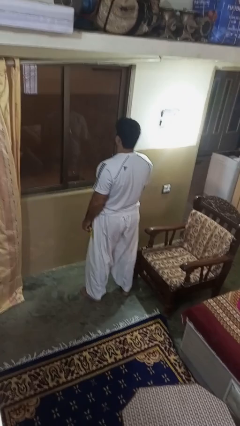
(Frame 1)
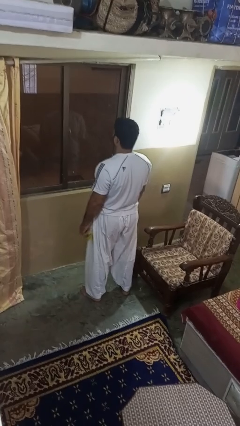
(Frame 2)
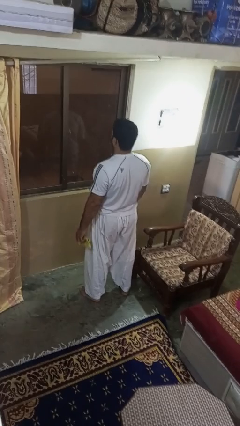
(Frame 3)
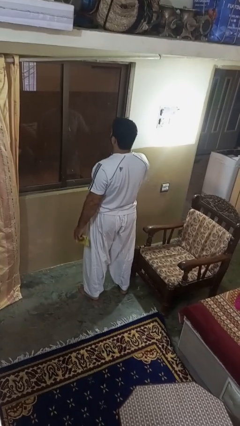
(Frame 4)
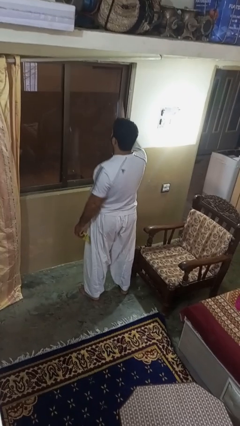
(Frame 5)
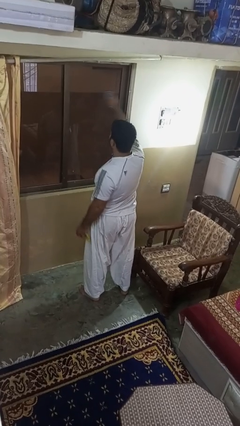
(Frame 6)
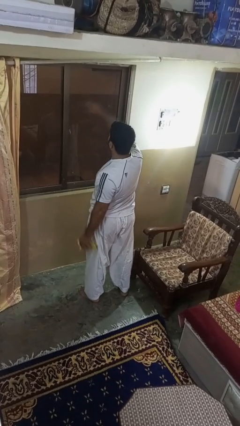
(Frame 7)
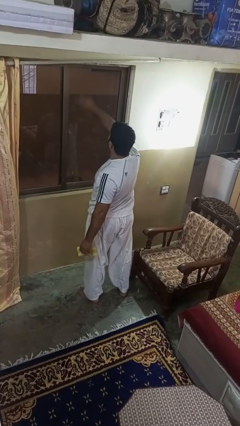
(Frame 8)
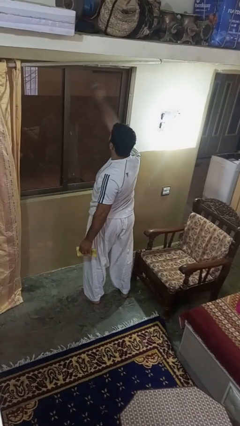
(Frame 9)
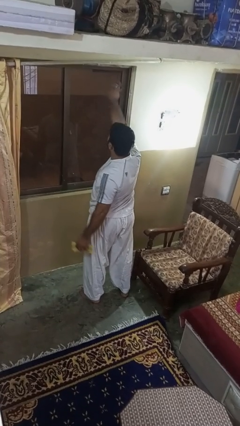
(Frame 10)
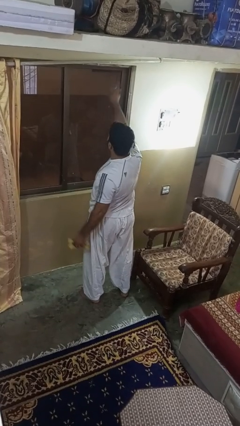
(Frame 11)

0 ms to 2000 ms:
person sprays from bottle

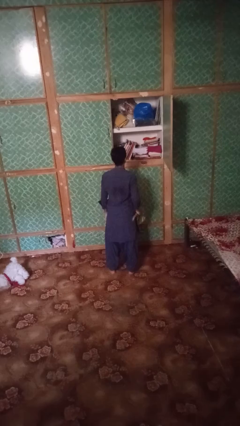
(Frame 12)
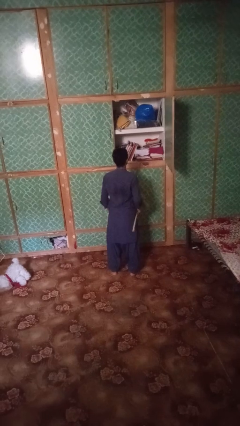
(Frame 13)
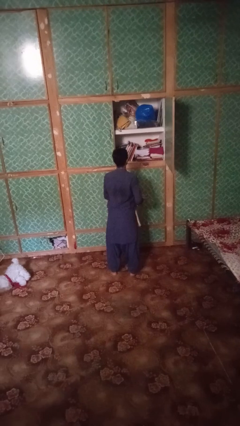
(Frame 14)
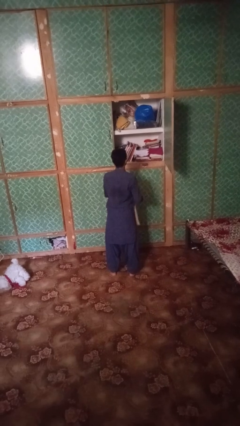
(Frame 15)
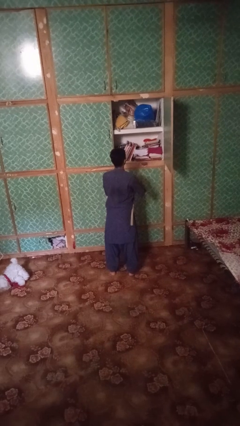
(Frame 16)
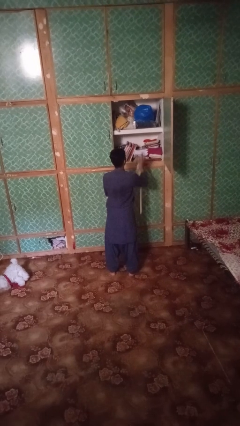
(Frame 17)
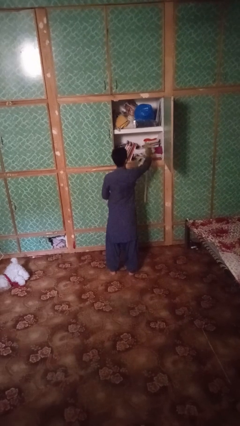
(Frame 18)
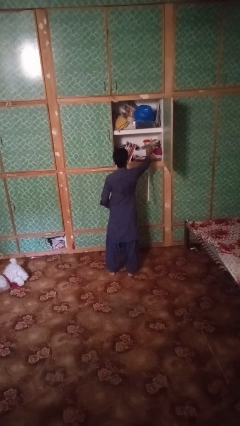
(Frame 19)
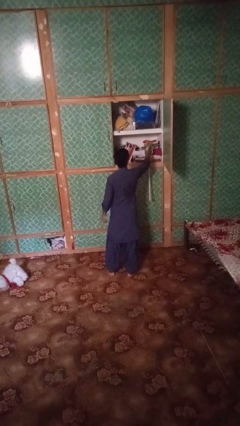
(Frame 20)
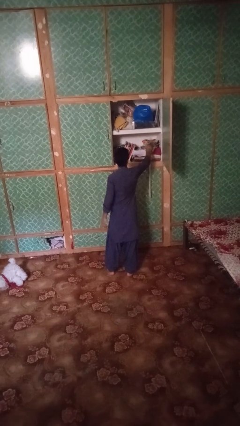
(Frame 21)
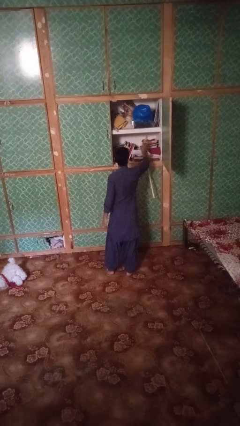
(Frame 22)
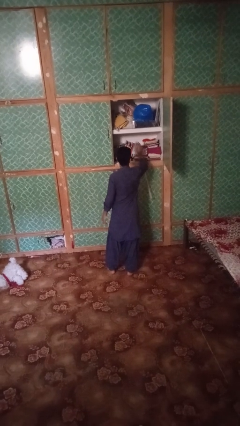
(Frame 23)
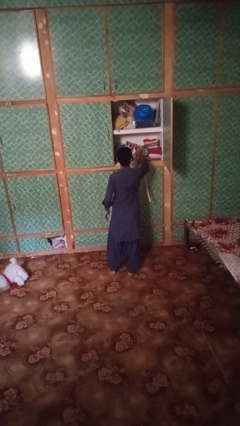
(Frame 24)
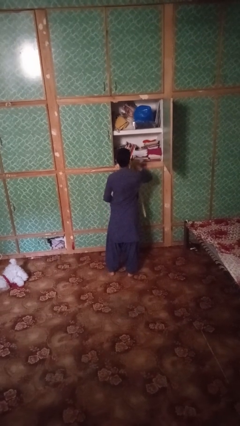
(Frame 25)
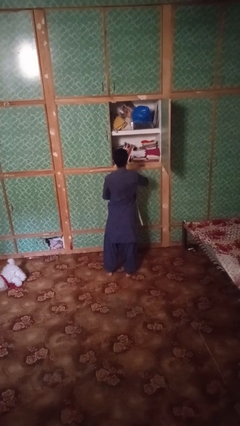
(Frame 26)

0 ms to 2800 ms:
person dusts furniture

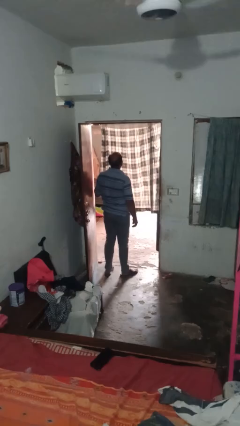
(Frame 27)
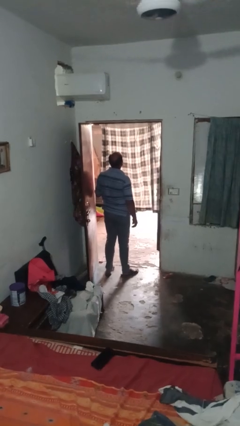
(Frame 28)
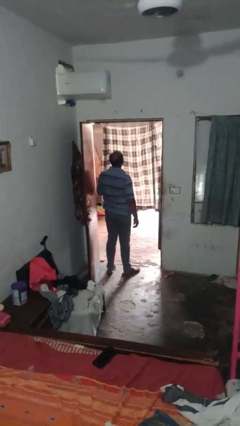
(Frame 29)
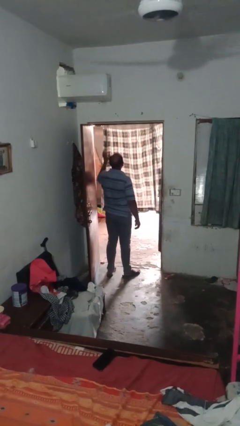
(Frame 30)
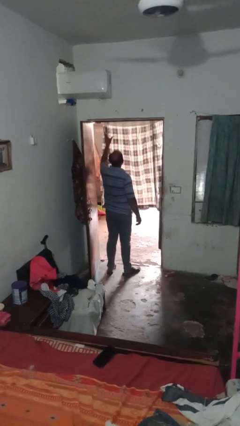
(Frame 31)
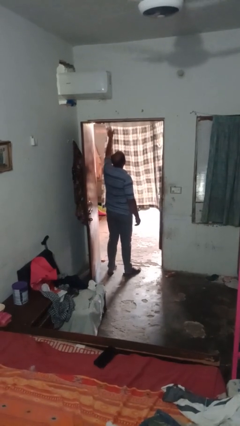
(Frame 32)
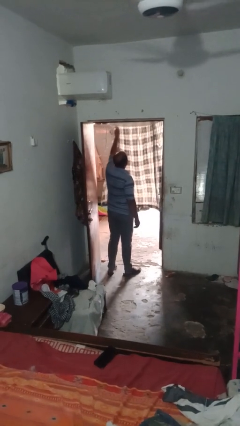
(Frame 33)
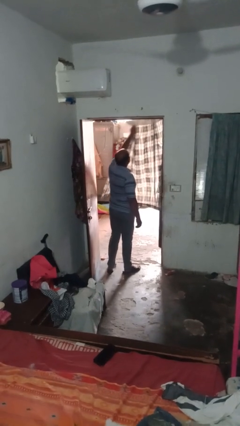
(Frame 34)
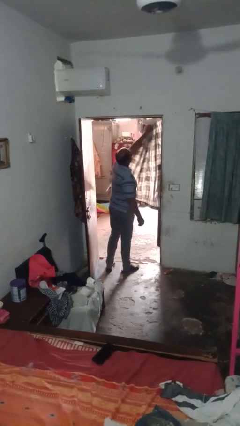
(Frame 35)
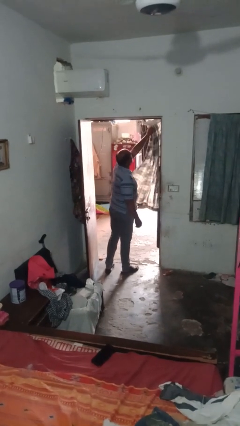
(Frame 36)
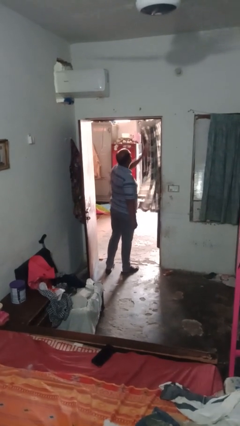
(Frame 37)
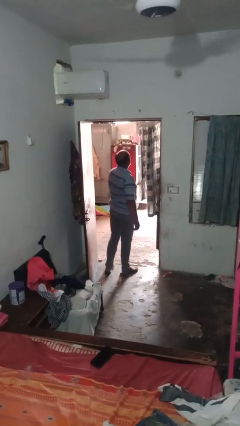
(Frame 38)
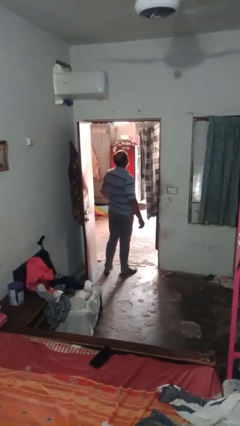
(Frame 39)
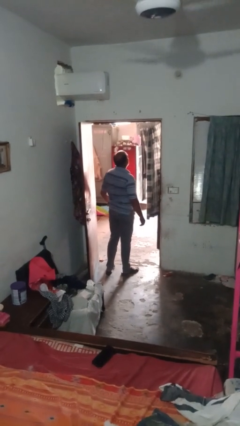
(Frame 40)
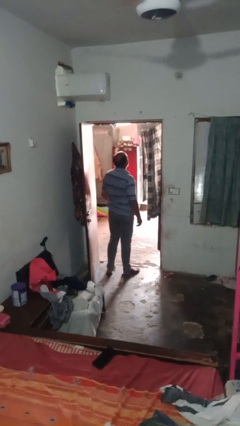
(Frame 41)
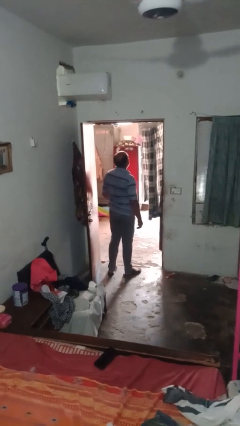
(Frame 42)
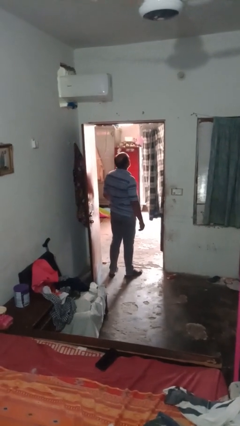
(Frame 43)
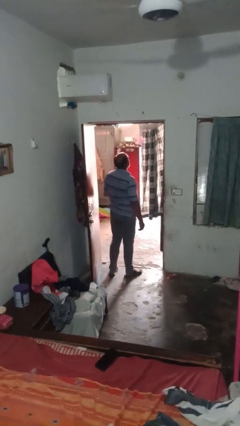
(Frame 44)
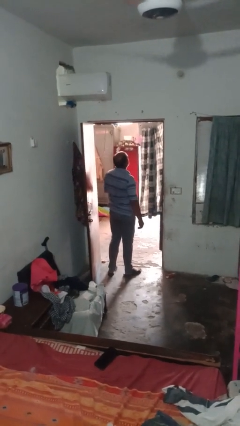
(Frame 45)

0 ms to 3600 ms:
person opens curtains

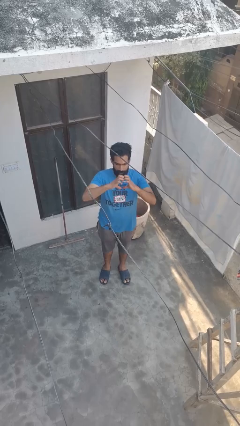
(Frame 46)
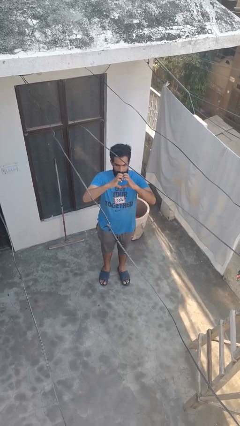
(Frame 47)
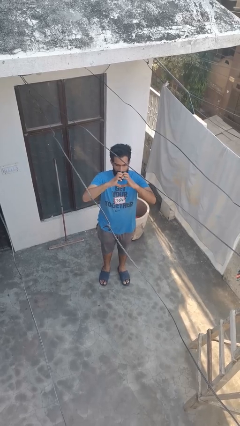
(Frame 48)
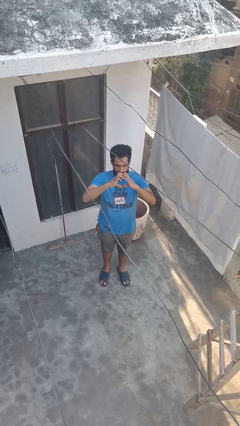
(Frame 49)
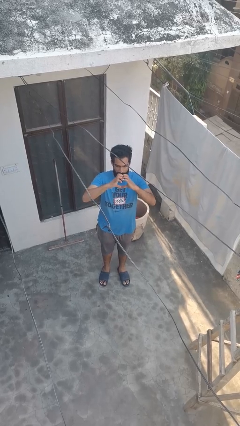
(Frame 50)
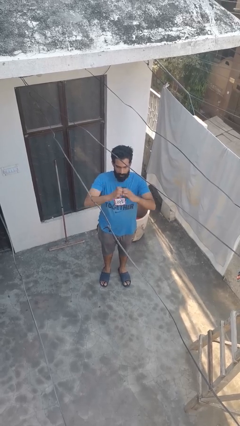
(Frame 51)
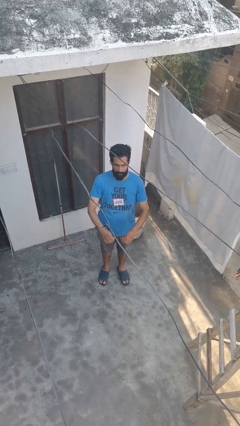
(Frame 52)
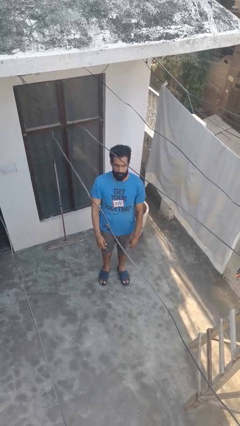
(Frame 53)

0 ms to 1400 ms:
person gestures heart

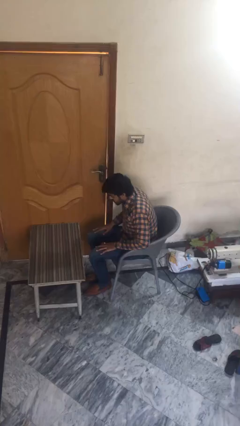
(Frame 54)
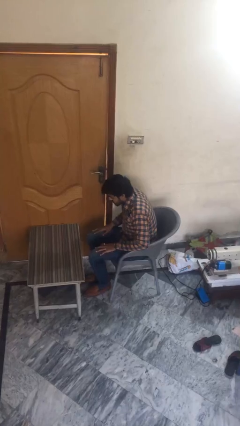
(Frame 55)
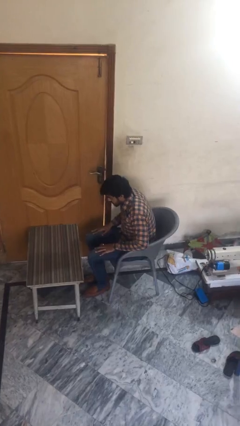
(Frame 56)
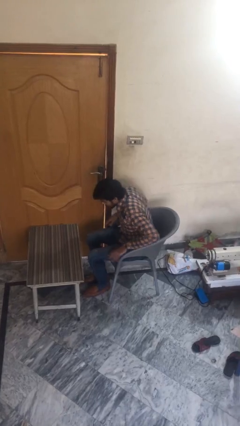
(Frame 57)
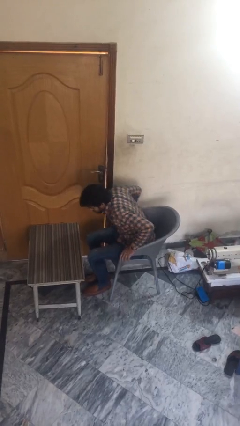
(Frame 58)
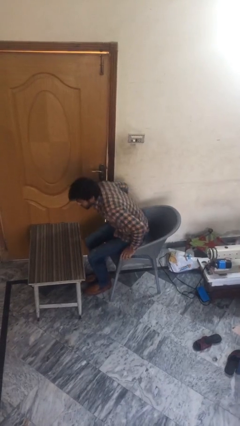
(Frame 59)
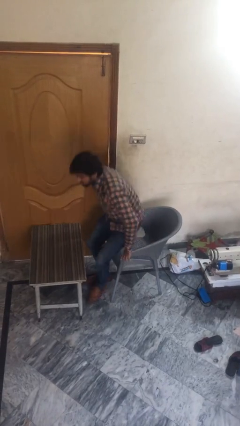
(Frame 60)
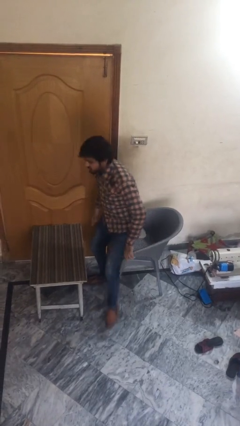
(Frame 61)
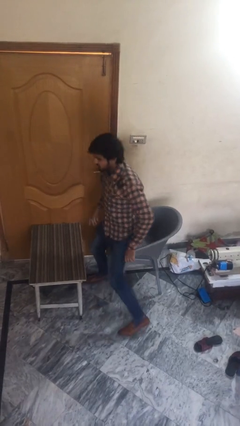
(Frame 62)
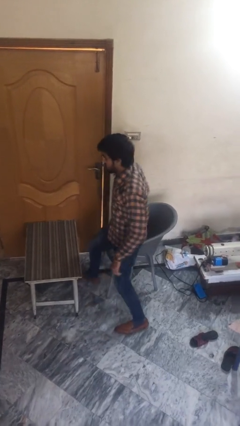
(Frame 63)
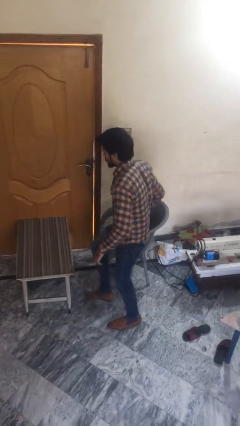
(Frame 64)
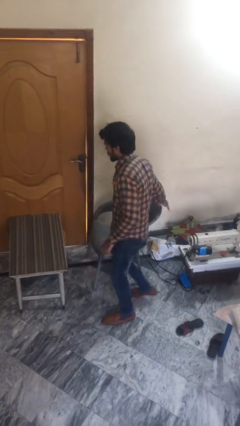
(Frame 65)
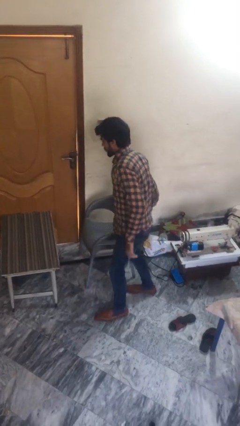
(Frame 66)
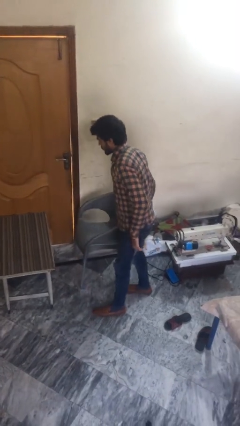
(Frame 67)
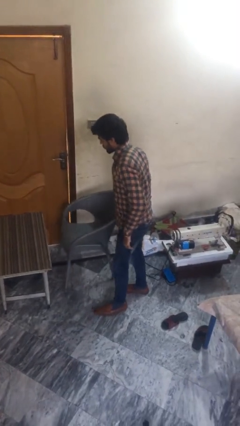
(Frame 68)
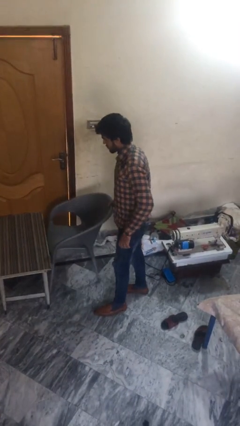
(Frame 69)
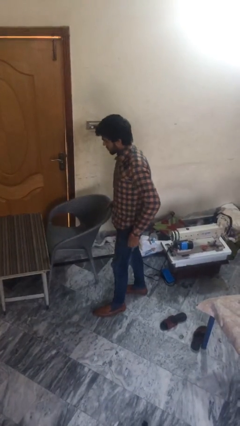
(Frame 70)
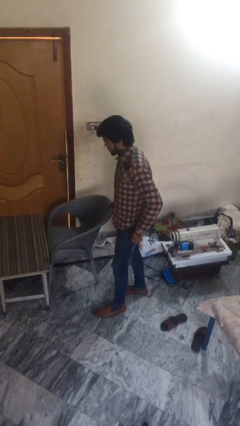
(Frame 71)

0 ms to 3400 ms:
person stands up

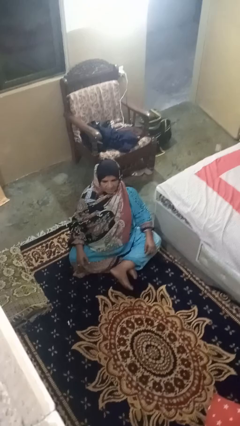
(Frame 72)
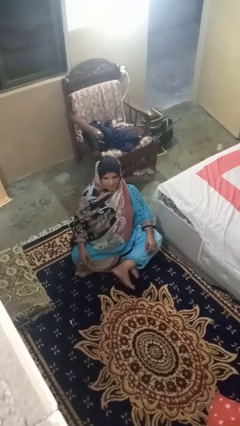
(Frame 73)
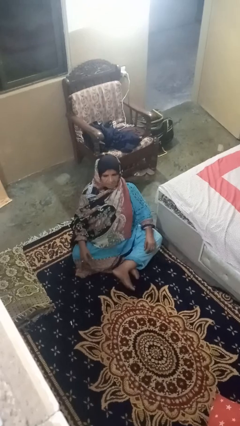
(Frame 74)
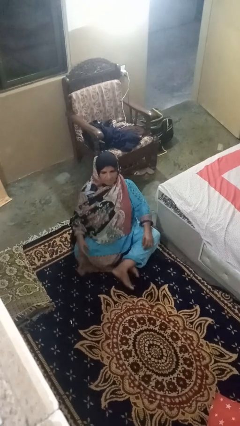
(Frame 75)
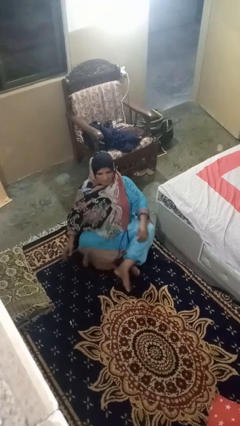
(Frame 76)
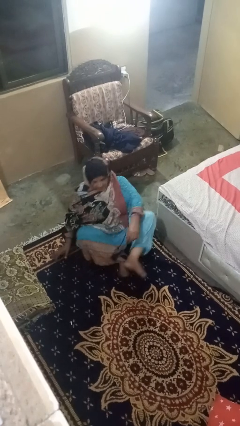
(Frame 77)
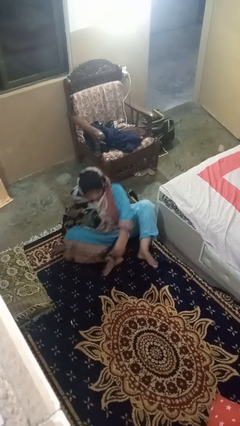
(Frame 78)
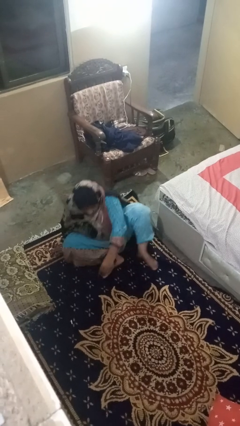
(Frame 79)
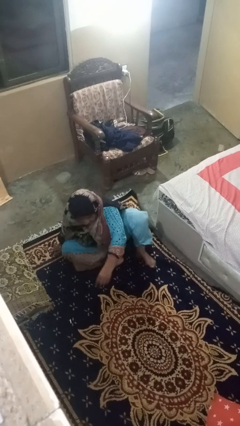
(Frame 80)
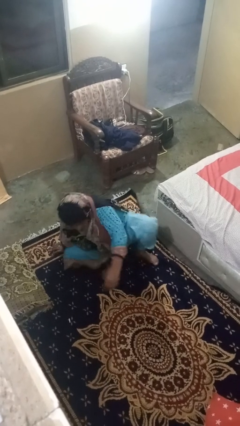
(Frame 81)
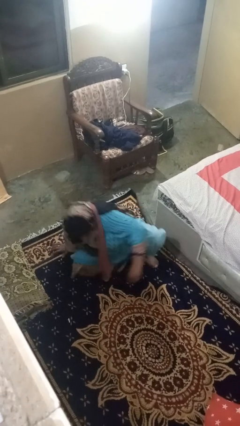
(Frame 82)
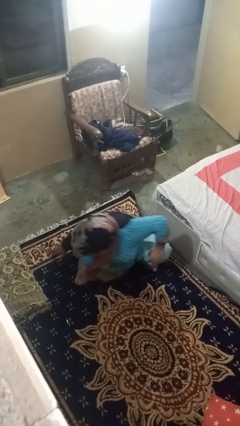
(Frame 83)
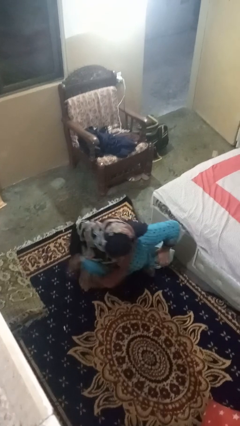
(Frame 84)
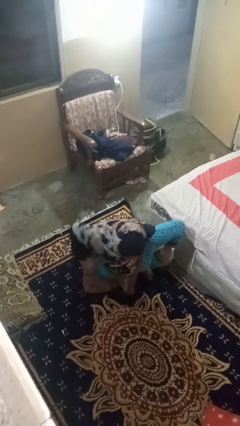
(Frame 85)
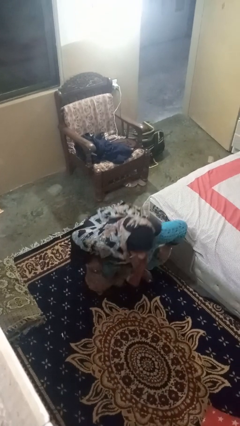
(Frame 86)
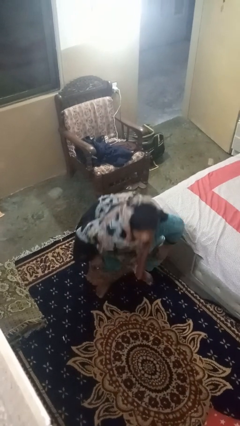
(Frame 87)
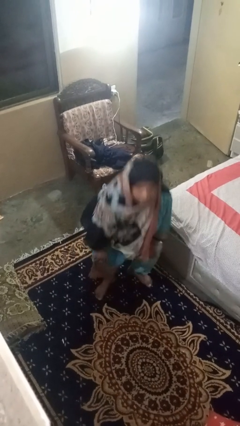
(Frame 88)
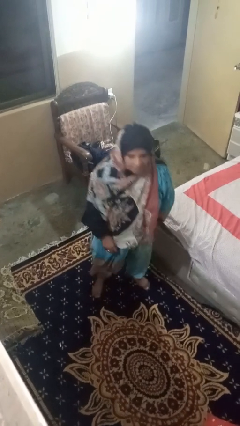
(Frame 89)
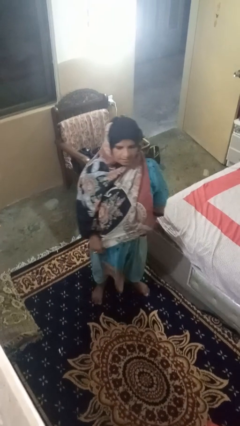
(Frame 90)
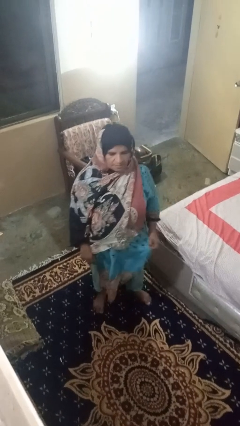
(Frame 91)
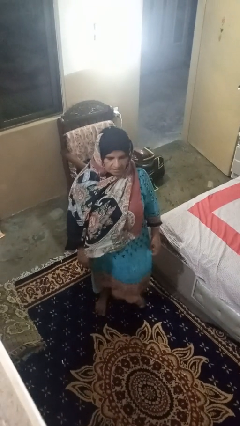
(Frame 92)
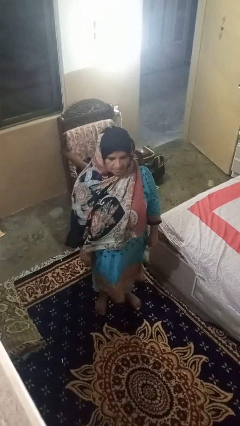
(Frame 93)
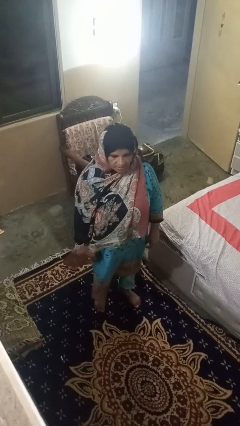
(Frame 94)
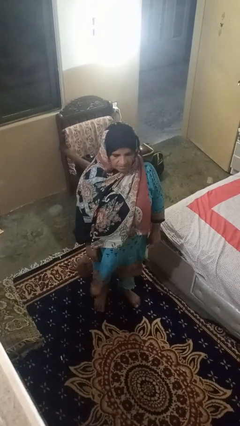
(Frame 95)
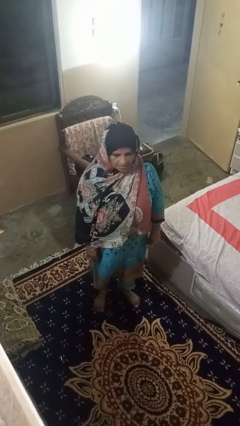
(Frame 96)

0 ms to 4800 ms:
person stands up from floor
